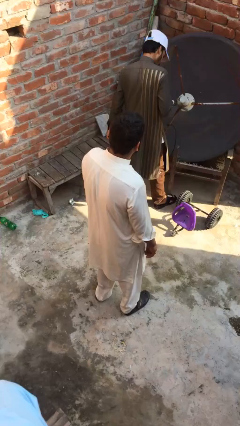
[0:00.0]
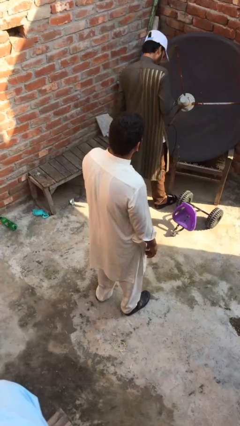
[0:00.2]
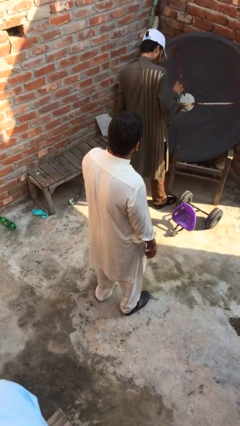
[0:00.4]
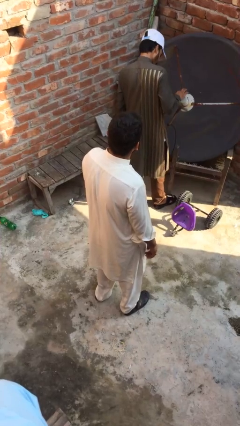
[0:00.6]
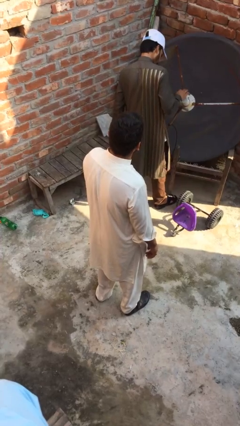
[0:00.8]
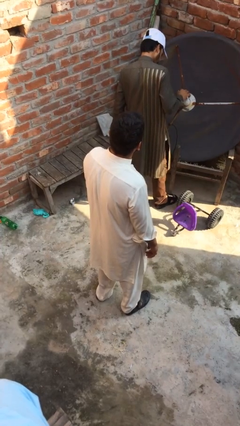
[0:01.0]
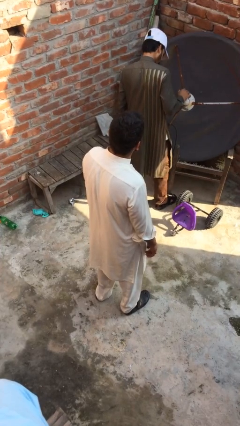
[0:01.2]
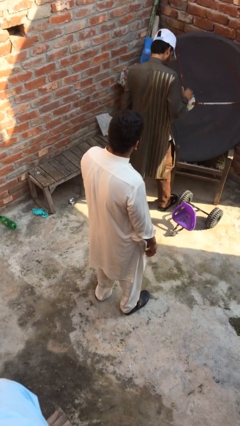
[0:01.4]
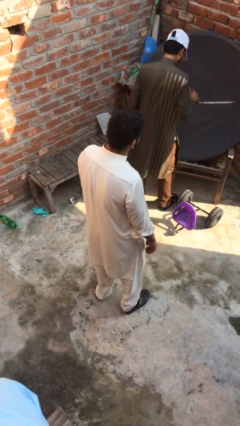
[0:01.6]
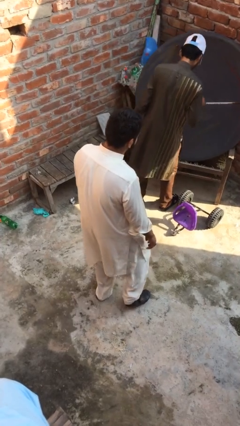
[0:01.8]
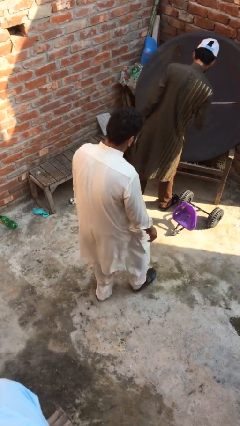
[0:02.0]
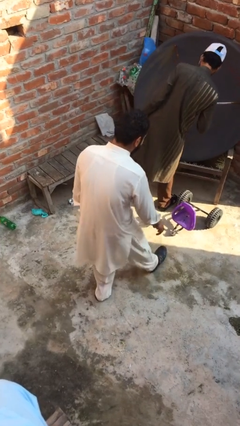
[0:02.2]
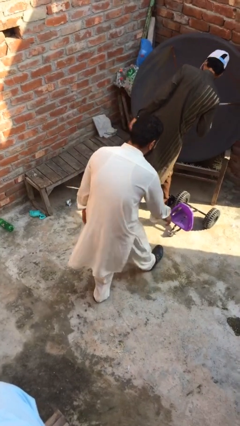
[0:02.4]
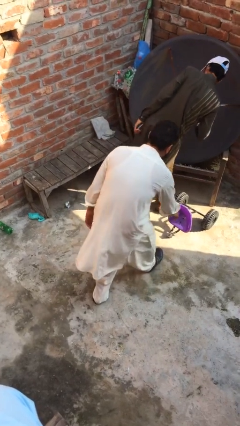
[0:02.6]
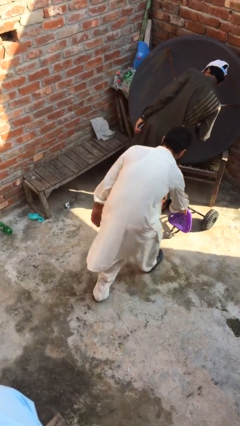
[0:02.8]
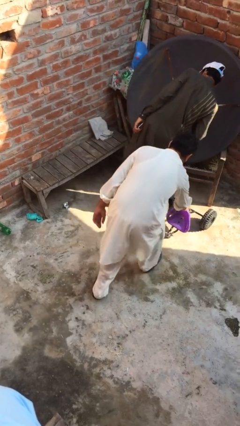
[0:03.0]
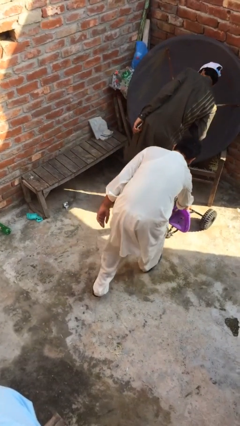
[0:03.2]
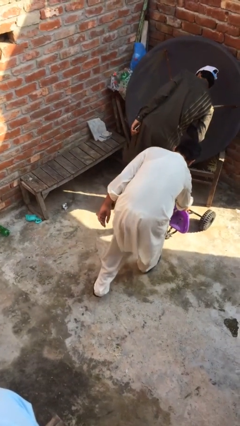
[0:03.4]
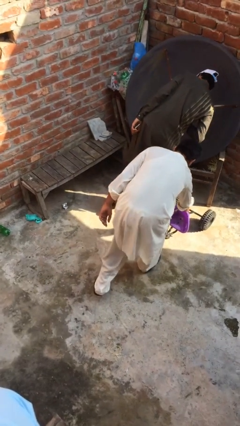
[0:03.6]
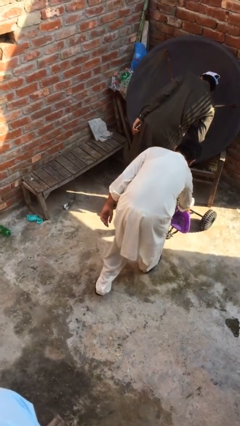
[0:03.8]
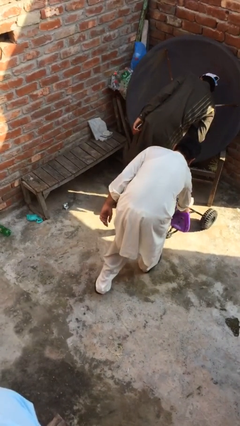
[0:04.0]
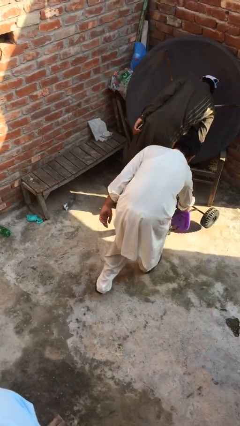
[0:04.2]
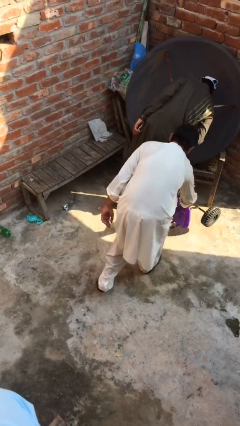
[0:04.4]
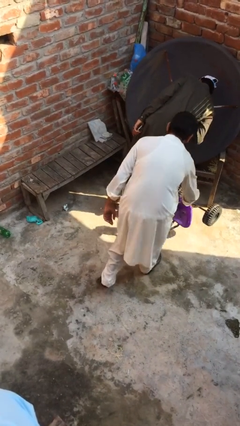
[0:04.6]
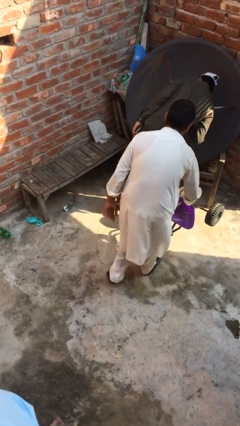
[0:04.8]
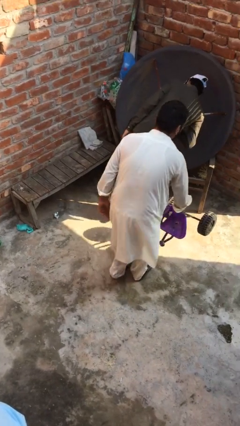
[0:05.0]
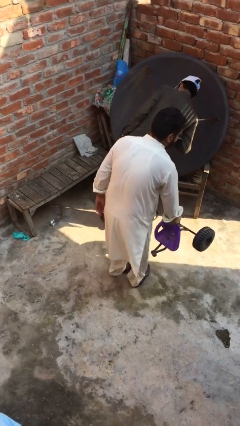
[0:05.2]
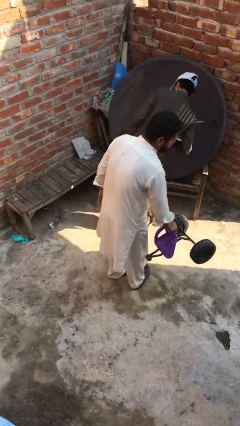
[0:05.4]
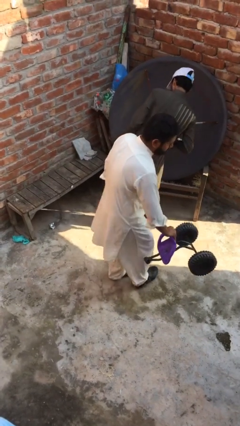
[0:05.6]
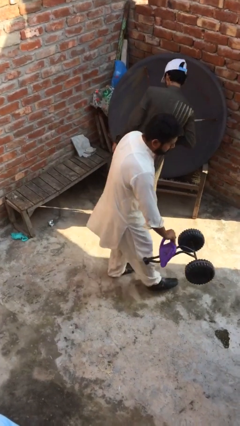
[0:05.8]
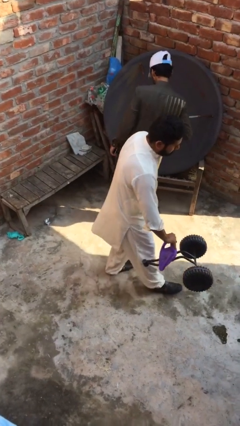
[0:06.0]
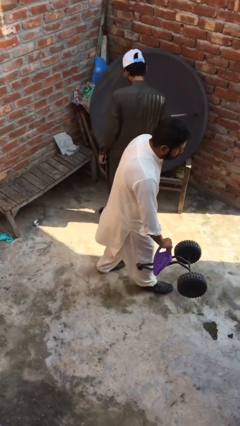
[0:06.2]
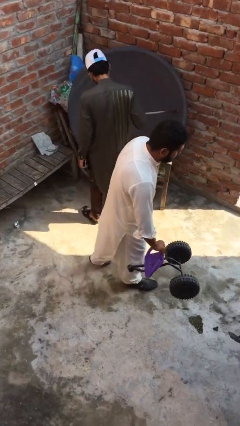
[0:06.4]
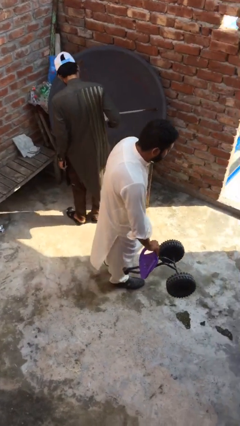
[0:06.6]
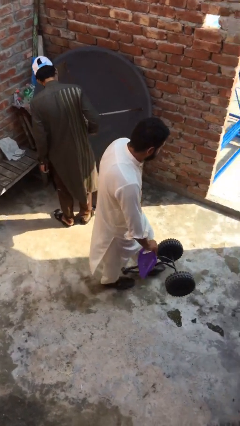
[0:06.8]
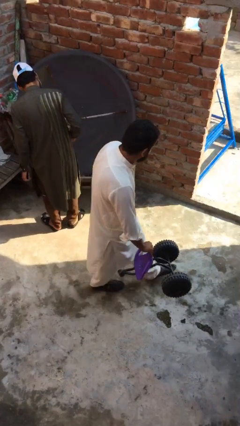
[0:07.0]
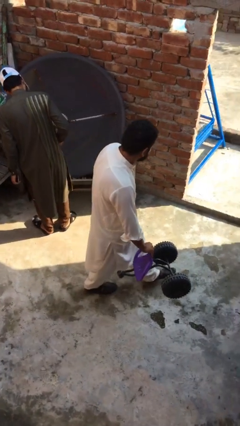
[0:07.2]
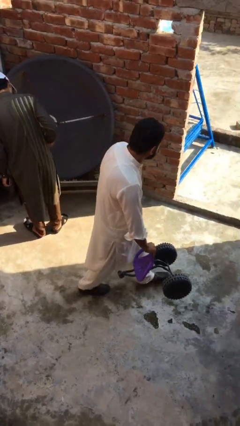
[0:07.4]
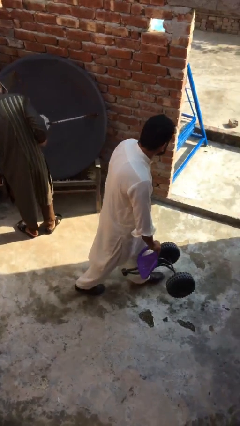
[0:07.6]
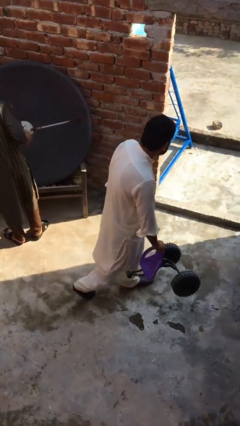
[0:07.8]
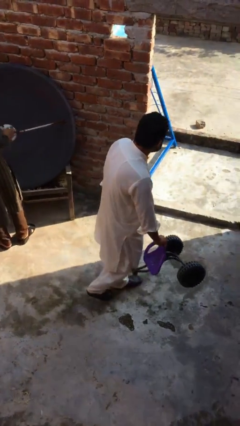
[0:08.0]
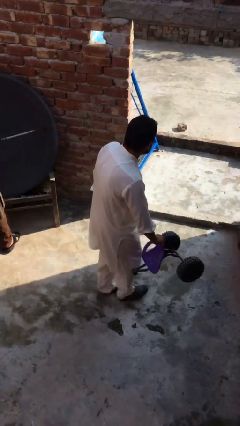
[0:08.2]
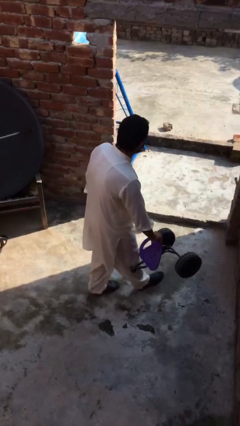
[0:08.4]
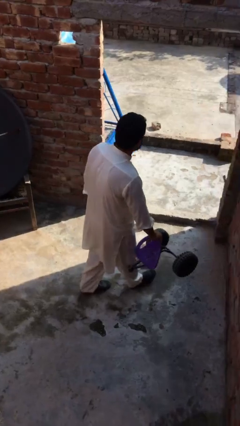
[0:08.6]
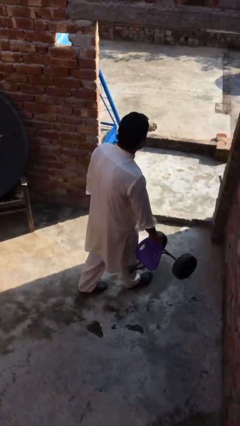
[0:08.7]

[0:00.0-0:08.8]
person steals object from person

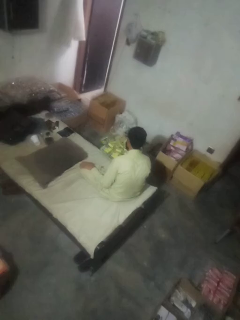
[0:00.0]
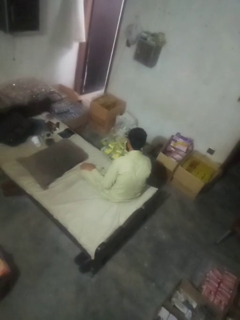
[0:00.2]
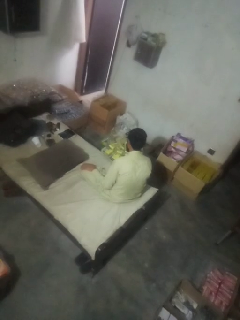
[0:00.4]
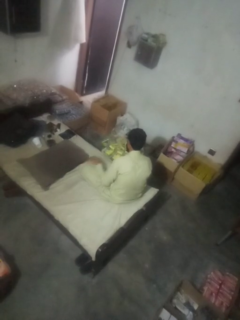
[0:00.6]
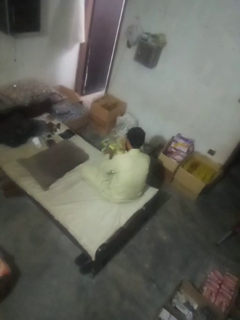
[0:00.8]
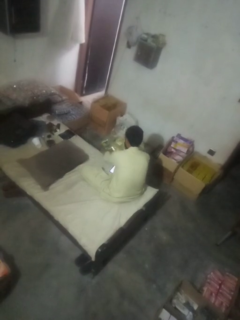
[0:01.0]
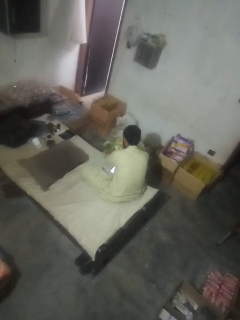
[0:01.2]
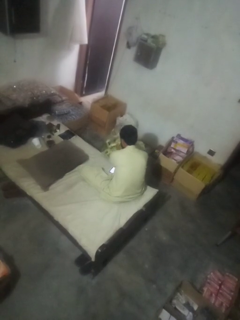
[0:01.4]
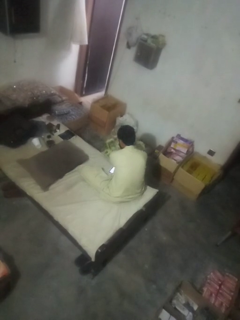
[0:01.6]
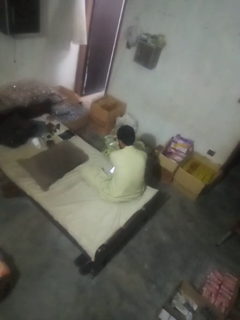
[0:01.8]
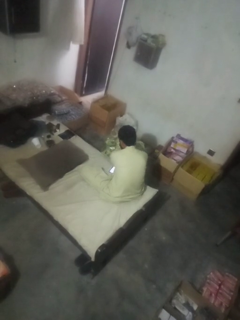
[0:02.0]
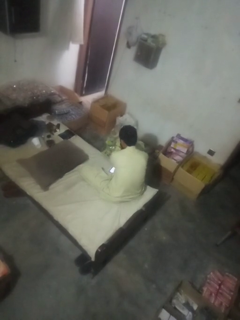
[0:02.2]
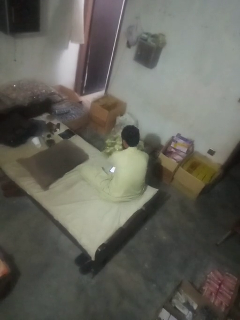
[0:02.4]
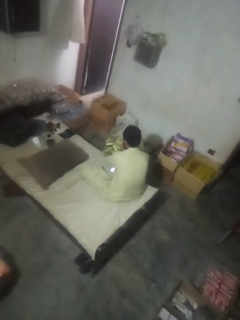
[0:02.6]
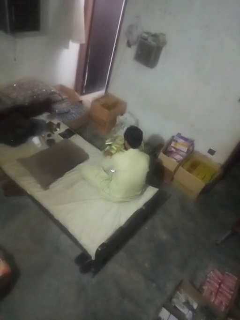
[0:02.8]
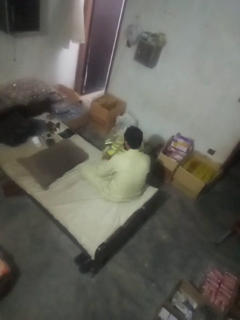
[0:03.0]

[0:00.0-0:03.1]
person searches in box

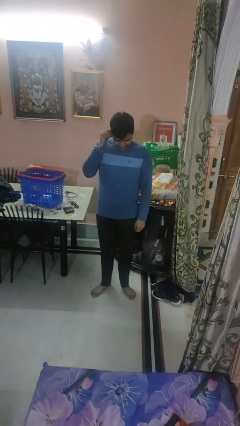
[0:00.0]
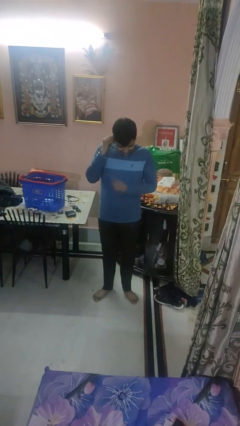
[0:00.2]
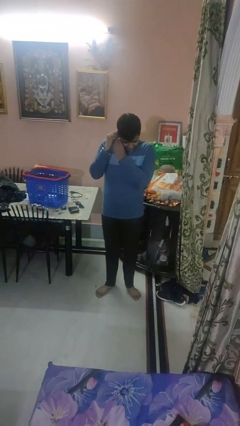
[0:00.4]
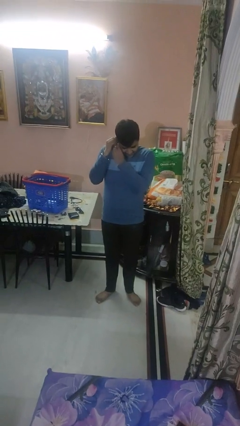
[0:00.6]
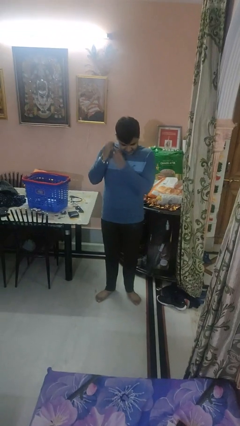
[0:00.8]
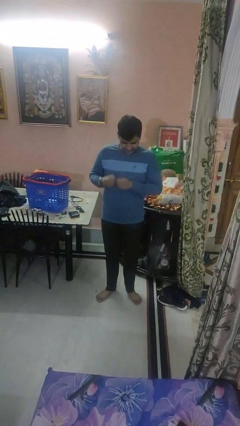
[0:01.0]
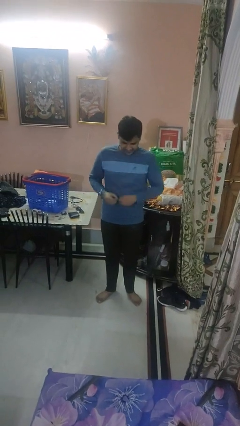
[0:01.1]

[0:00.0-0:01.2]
person takes off earrings

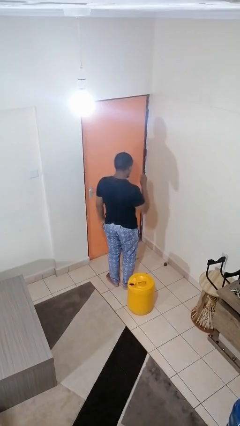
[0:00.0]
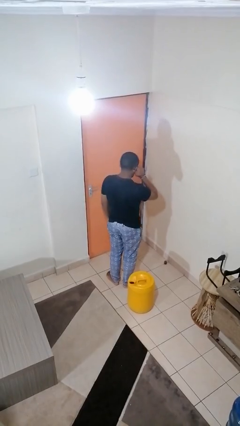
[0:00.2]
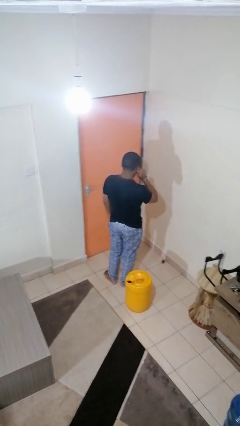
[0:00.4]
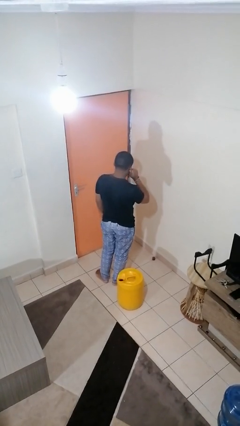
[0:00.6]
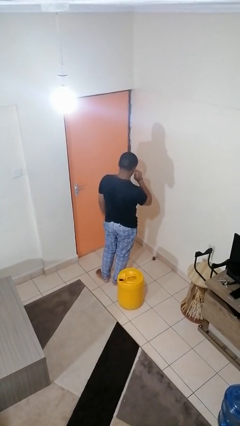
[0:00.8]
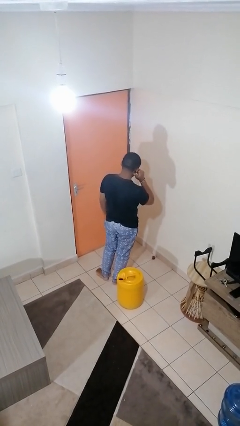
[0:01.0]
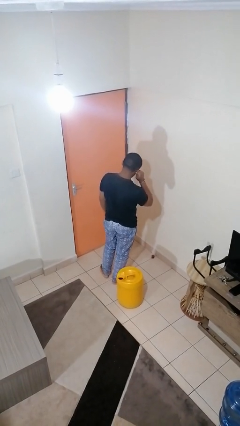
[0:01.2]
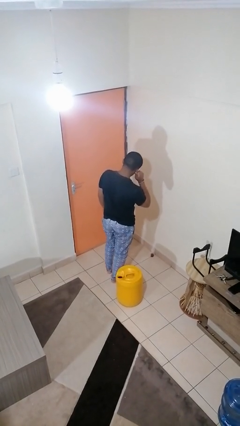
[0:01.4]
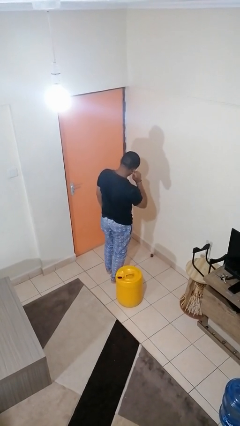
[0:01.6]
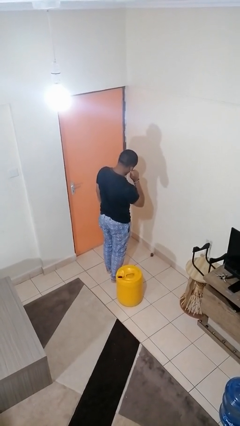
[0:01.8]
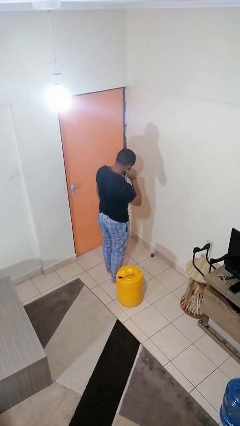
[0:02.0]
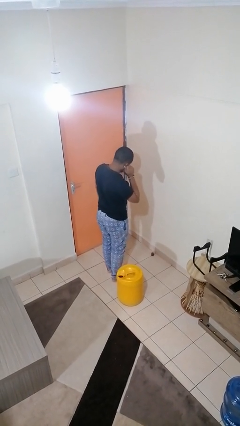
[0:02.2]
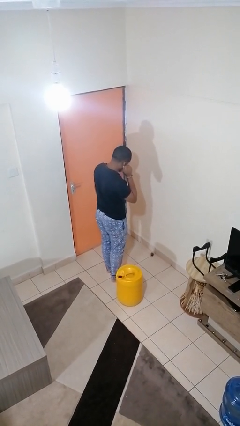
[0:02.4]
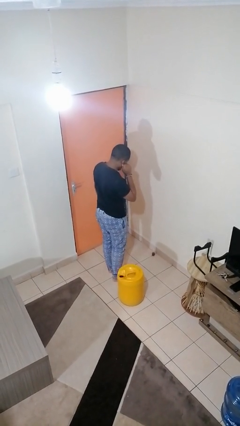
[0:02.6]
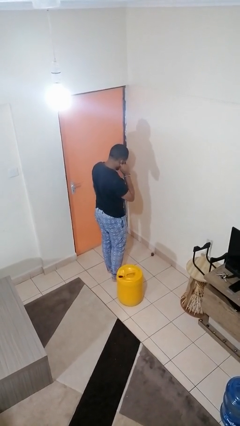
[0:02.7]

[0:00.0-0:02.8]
person touches earlobe

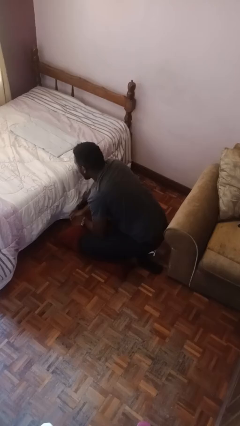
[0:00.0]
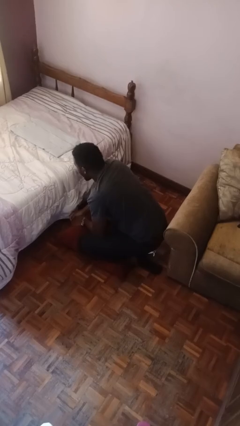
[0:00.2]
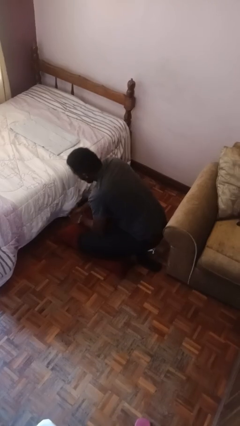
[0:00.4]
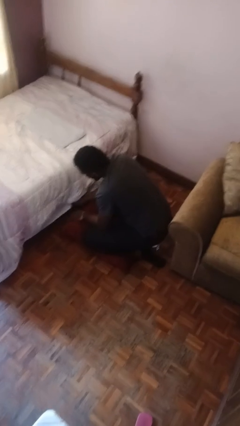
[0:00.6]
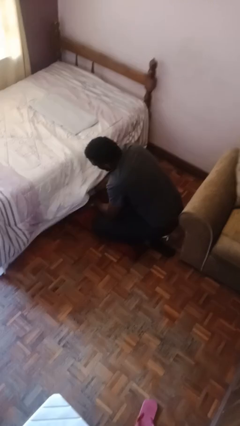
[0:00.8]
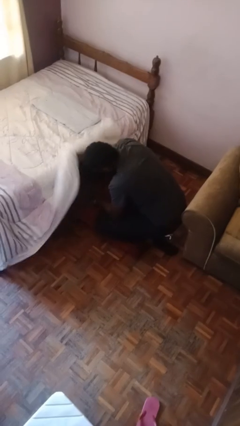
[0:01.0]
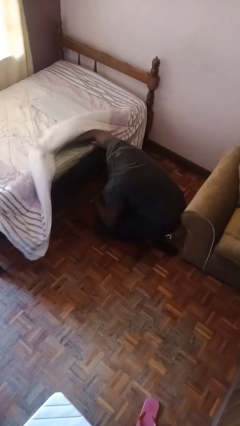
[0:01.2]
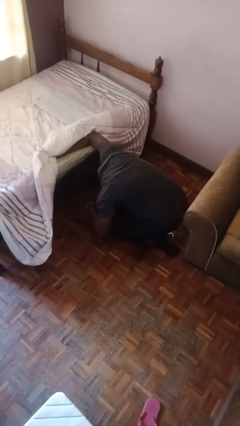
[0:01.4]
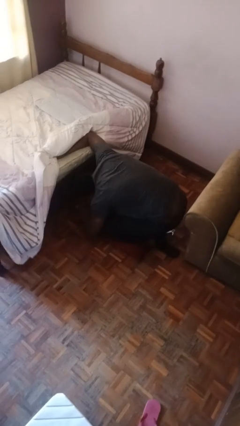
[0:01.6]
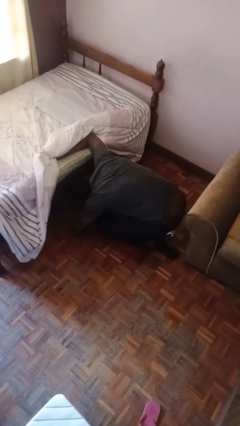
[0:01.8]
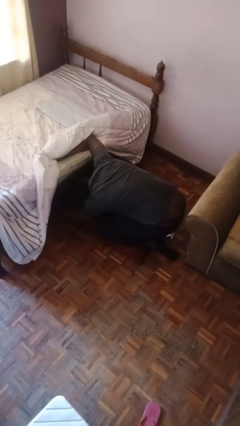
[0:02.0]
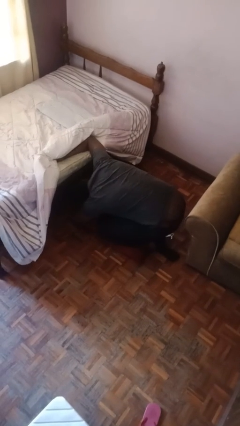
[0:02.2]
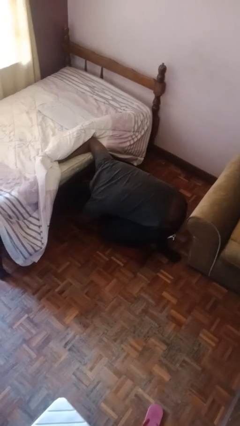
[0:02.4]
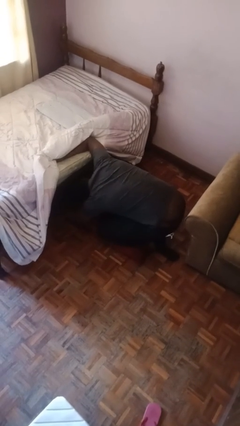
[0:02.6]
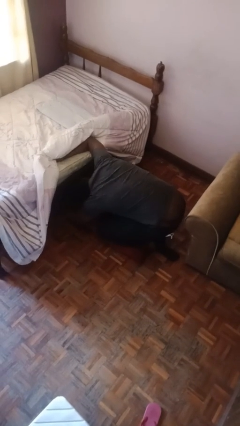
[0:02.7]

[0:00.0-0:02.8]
person searches under bed
